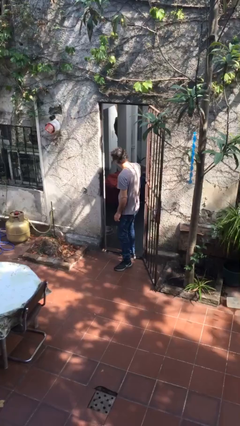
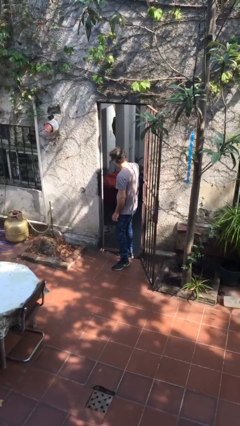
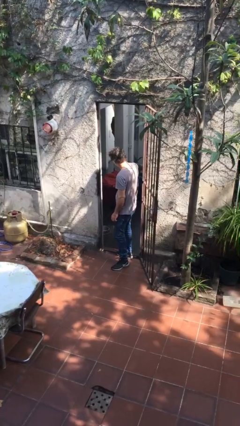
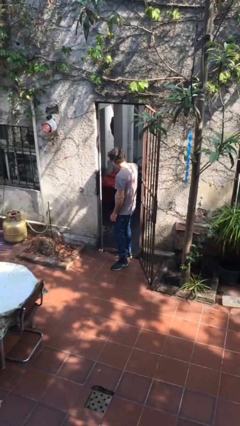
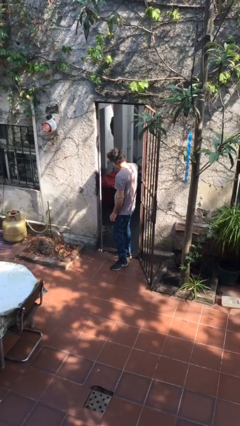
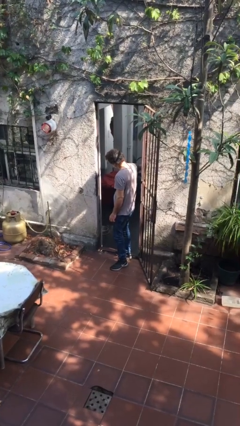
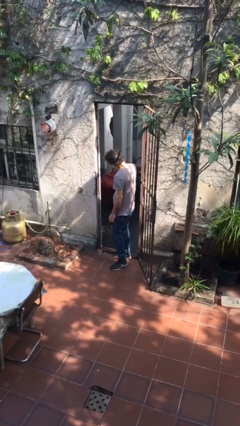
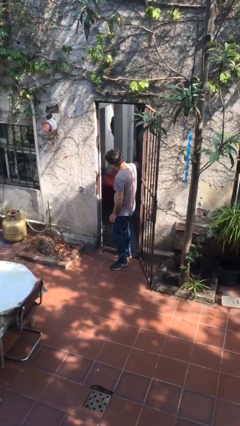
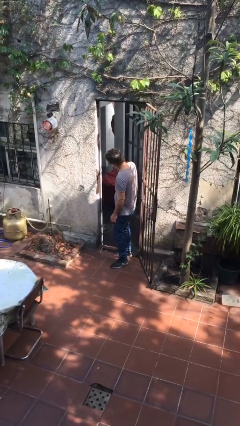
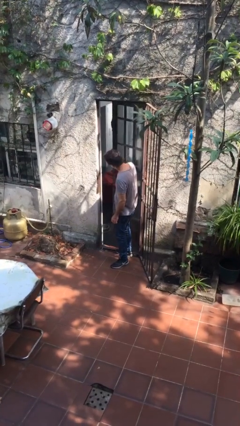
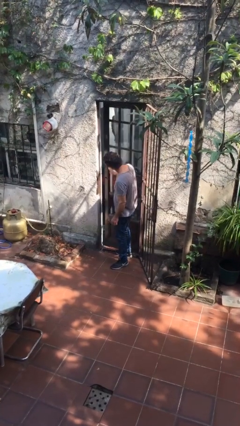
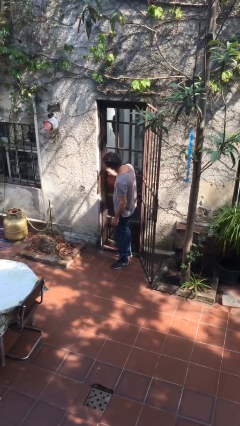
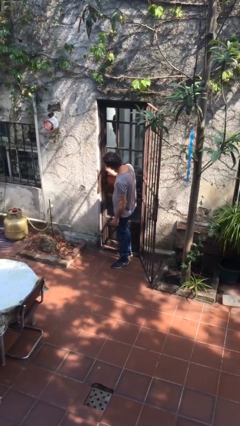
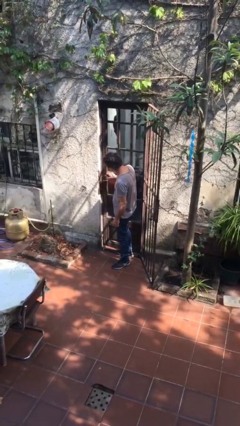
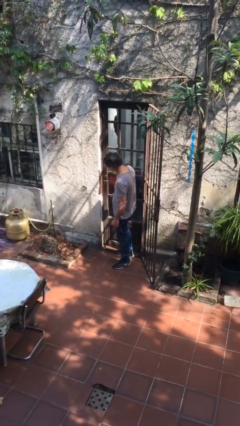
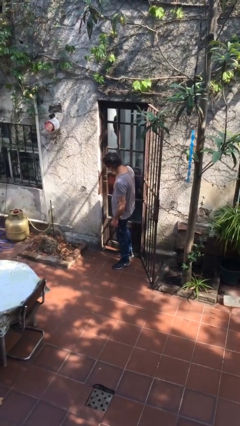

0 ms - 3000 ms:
person closes facility door

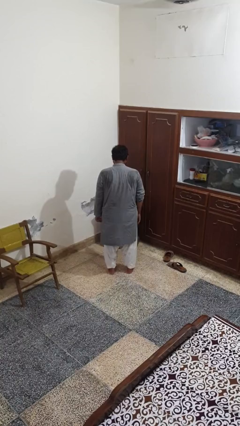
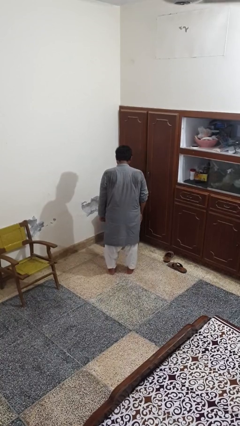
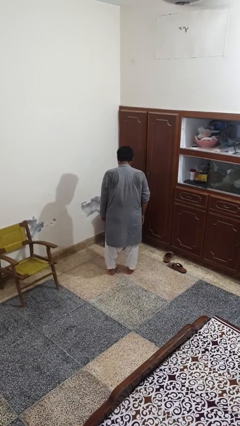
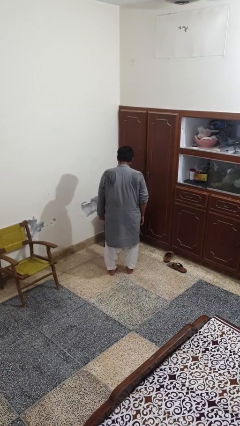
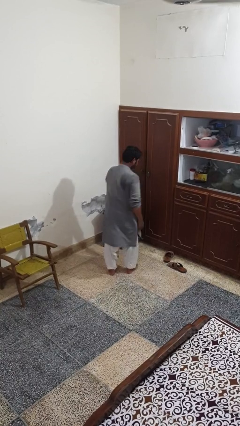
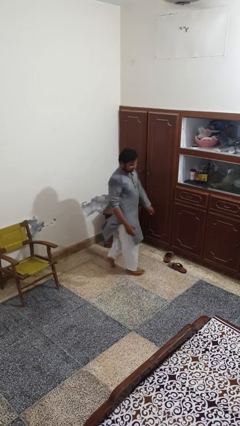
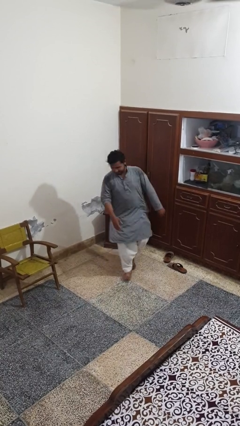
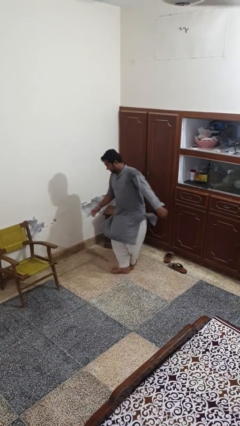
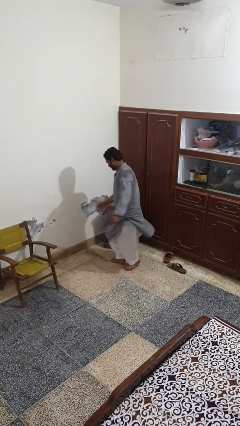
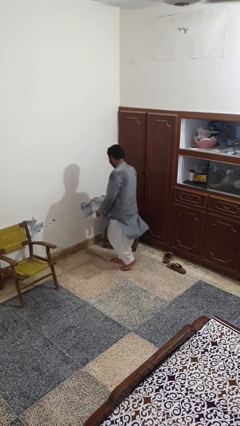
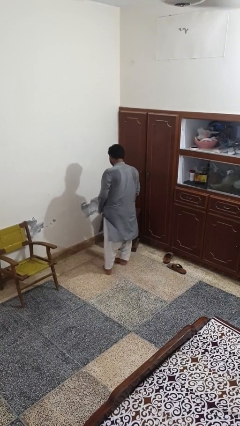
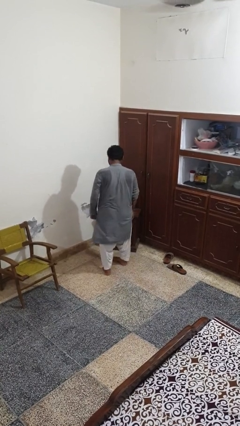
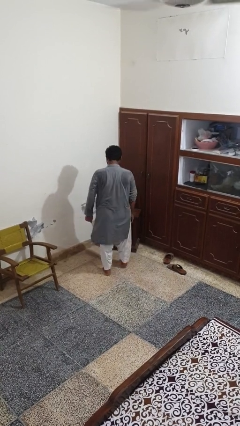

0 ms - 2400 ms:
person twirls

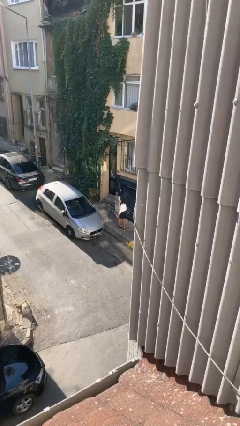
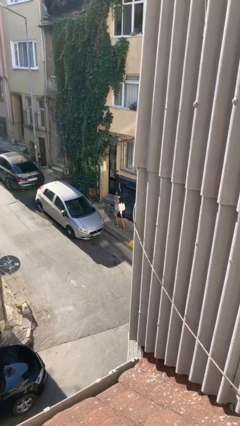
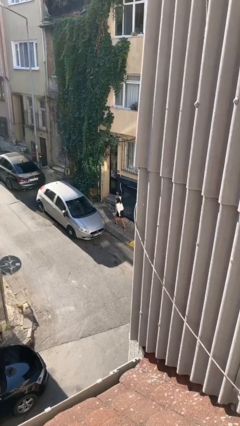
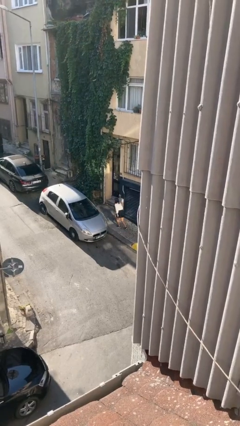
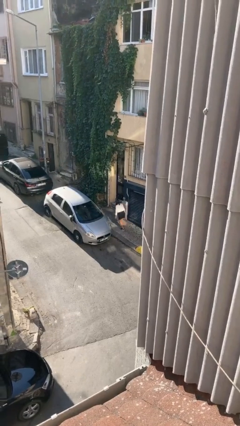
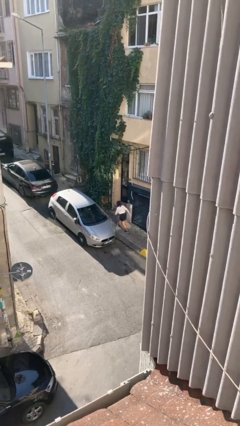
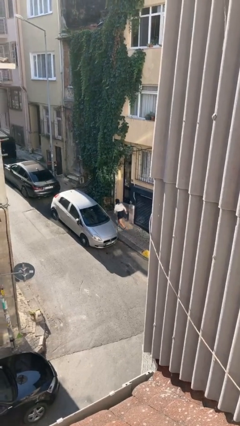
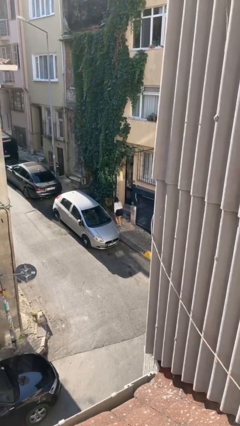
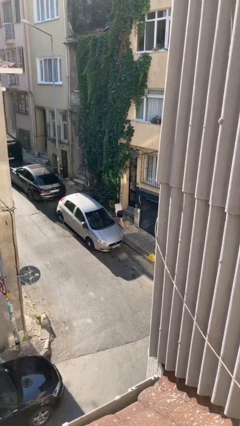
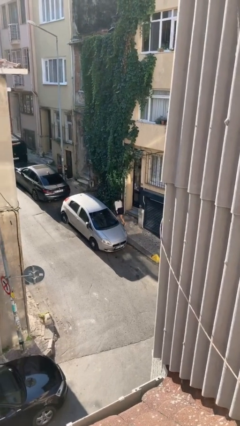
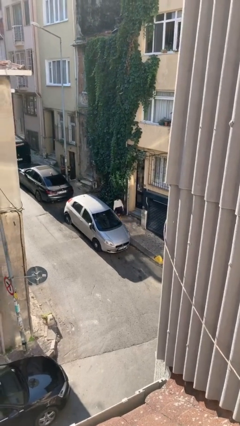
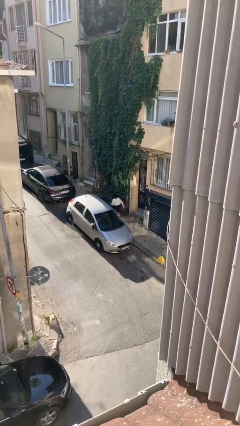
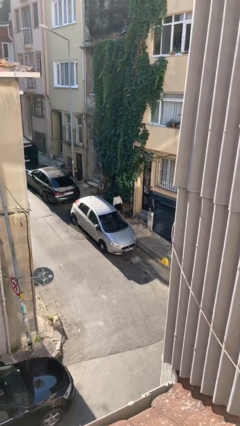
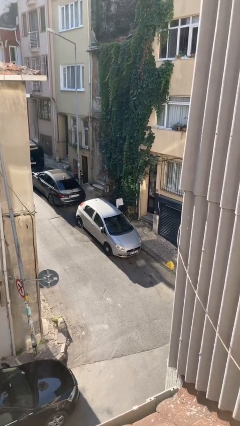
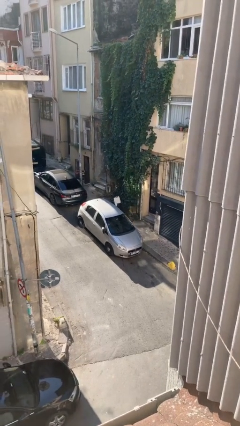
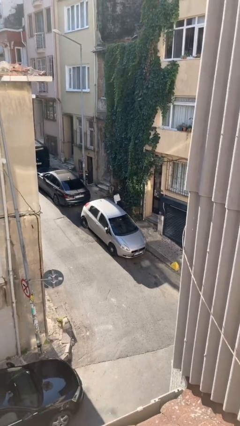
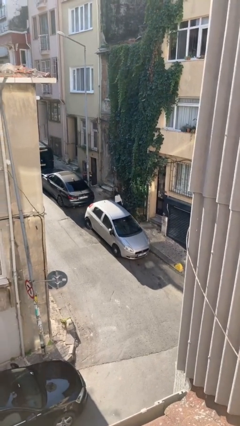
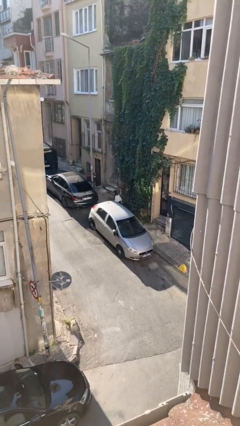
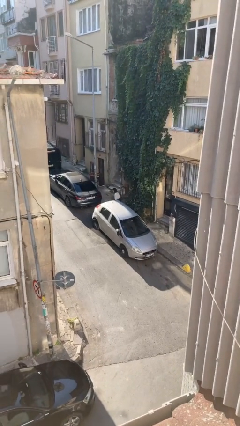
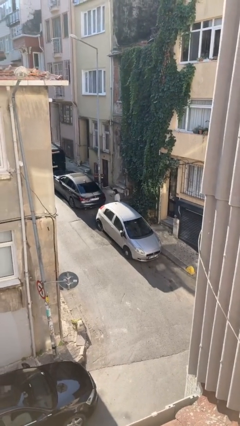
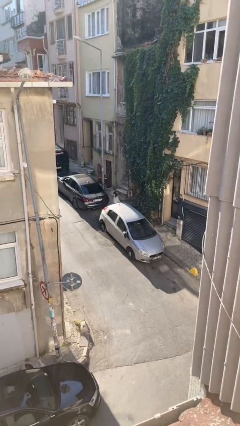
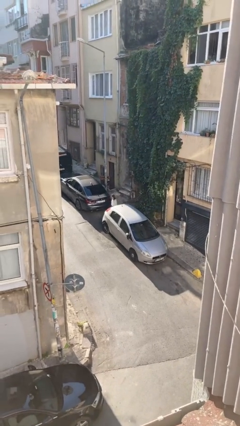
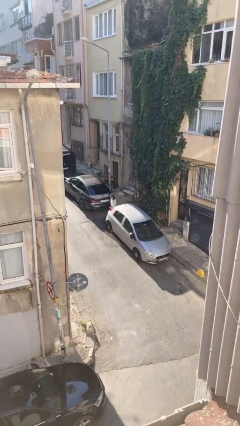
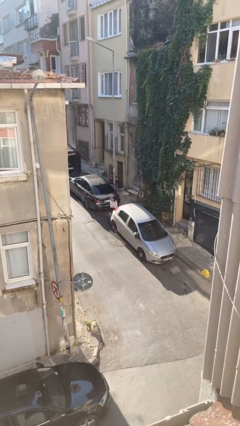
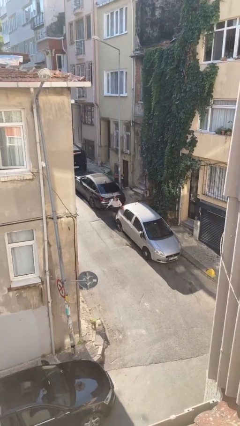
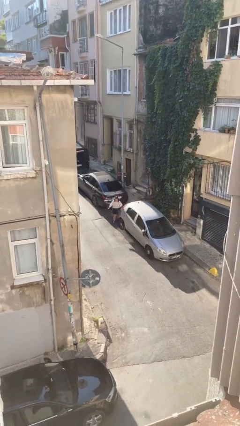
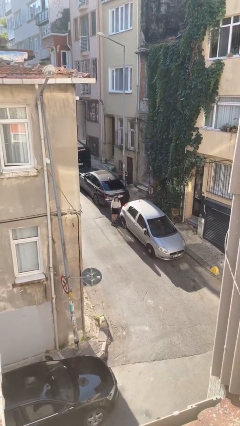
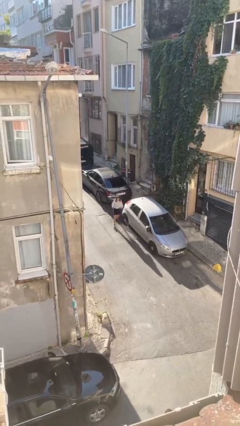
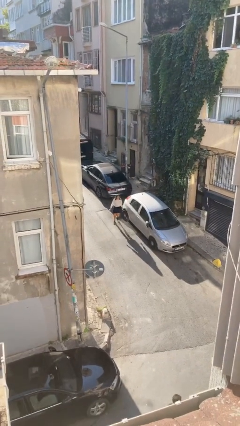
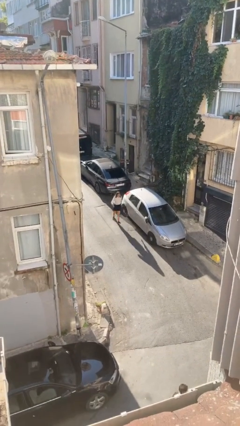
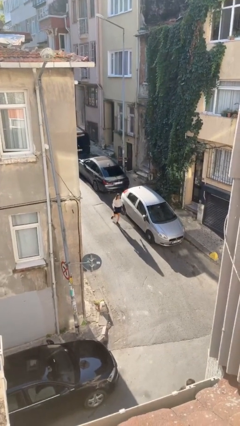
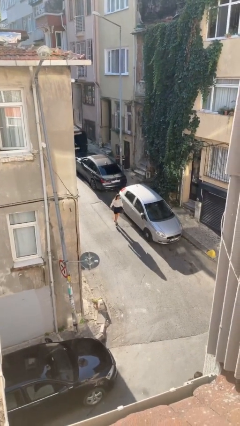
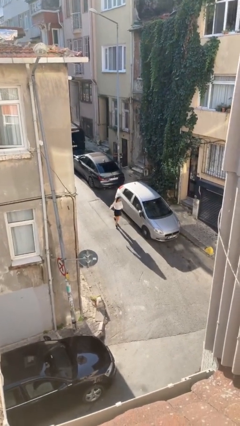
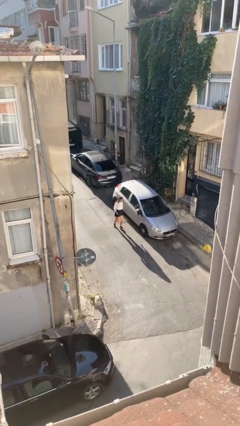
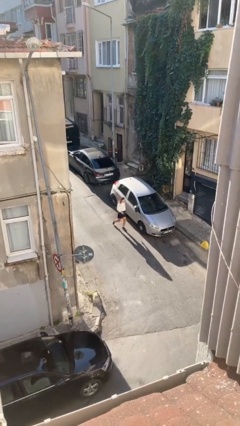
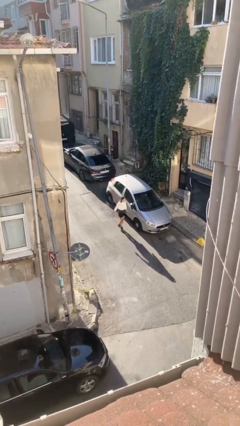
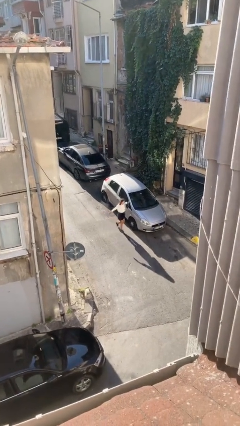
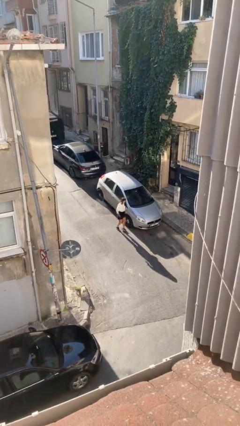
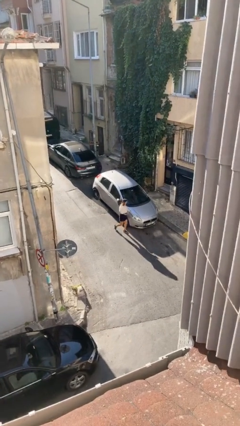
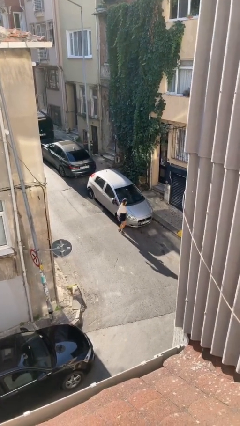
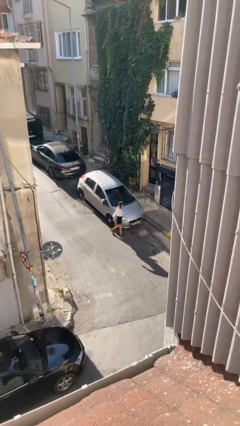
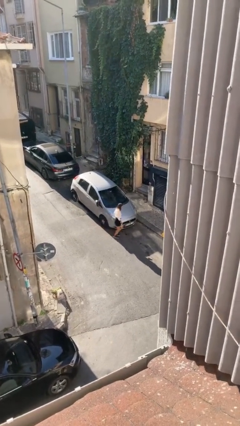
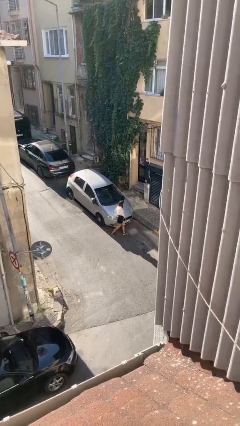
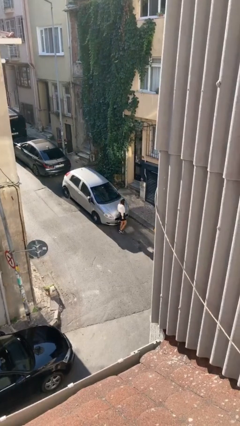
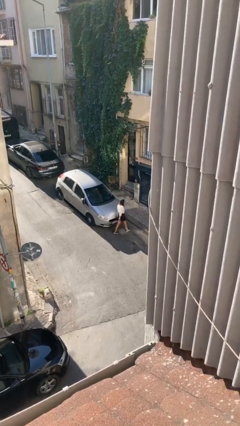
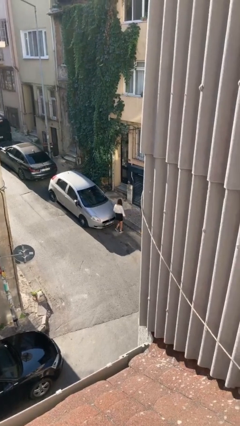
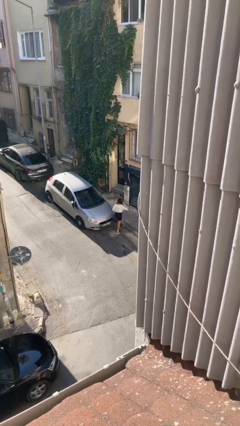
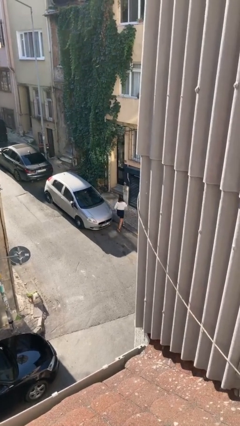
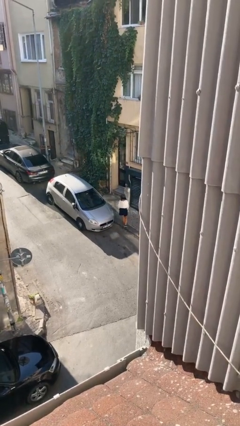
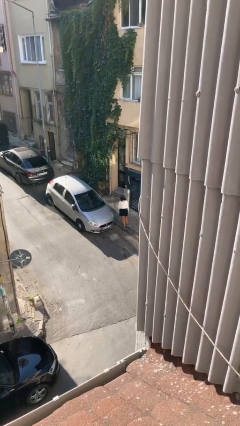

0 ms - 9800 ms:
person walks around car

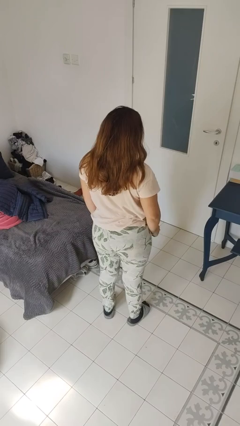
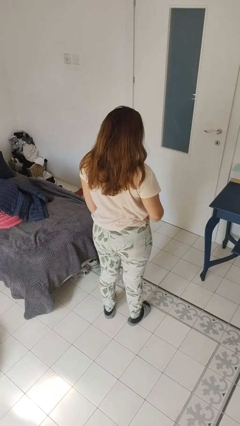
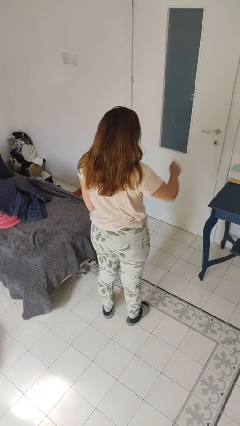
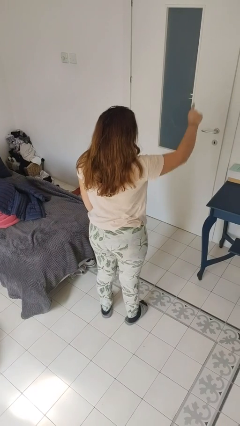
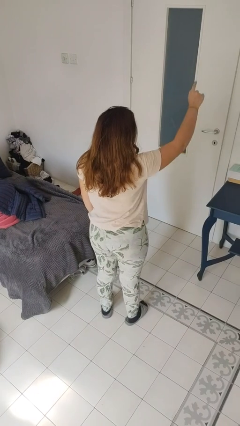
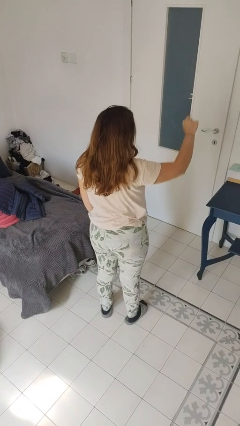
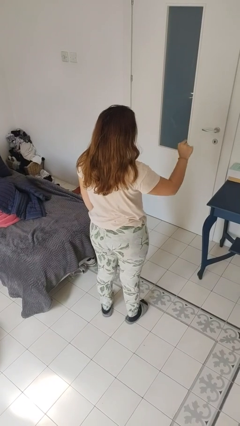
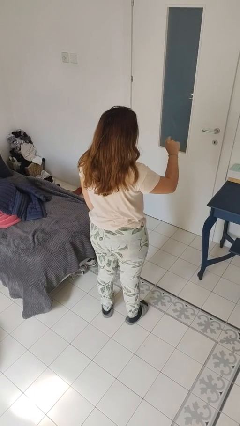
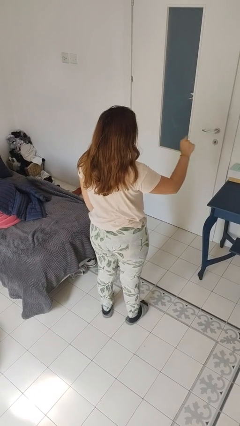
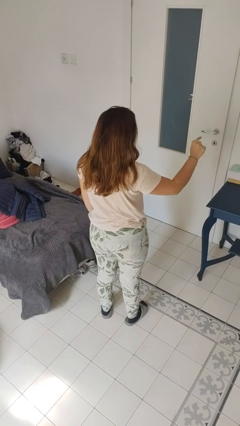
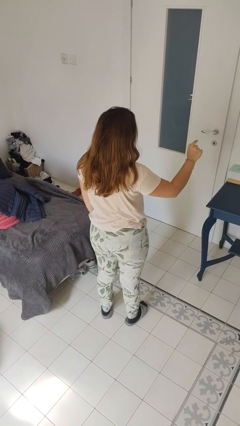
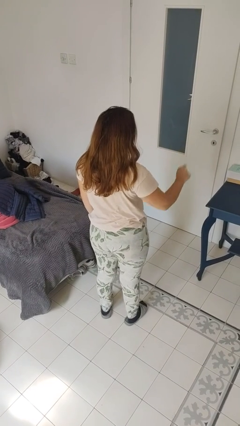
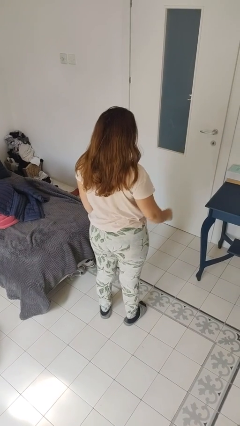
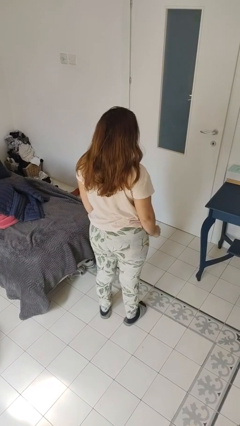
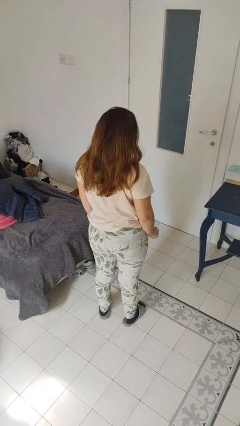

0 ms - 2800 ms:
person gestures number one
